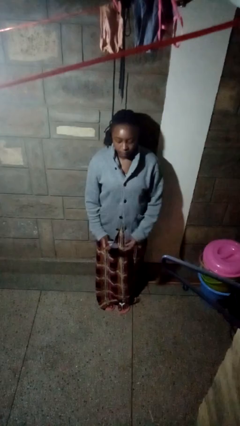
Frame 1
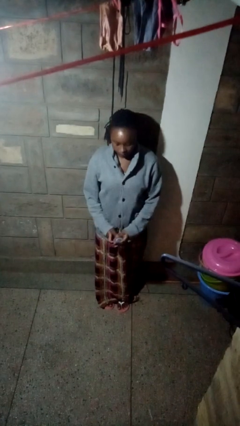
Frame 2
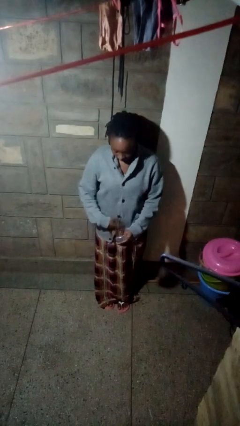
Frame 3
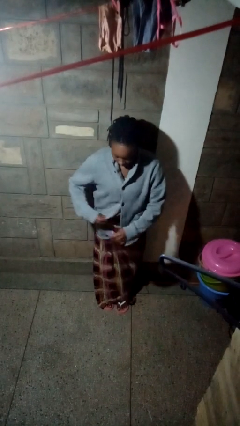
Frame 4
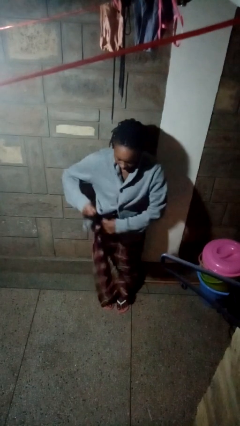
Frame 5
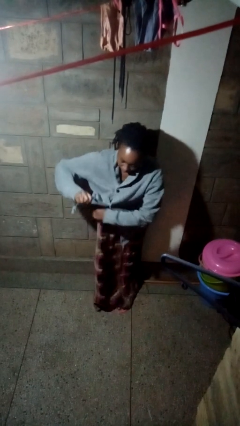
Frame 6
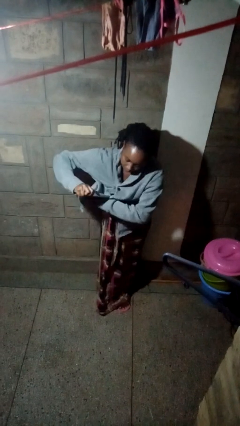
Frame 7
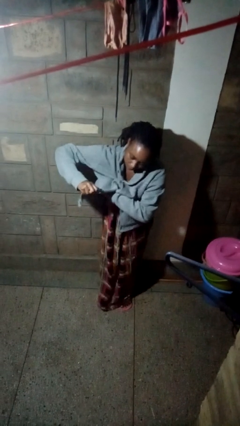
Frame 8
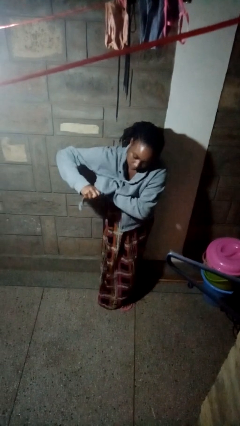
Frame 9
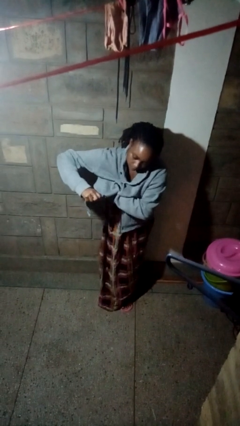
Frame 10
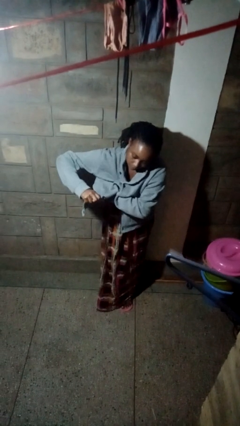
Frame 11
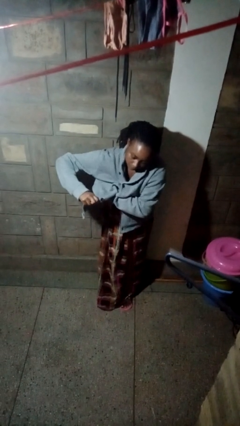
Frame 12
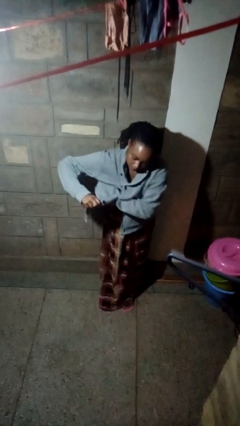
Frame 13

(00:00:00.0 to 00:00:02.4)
person applies deodorant

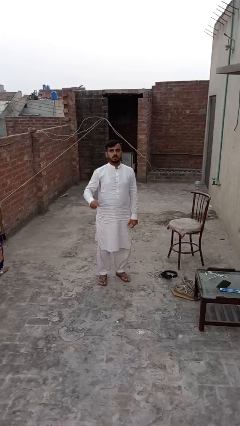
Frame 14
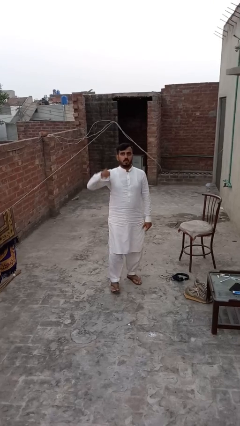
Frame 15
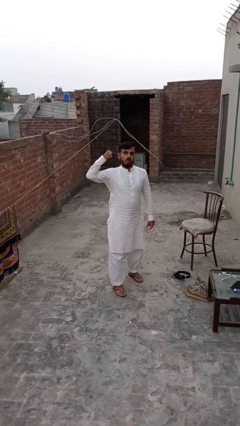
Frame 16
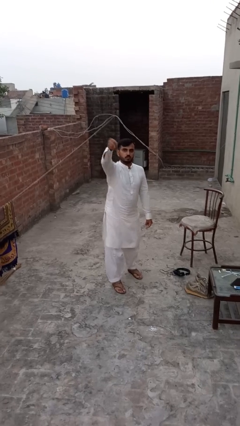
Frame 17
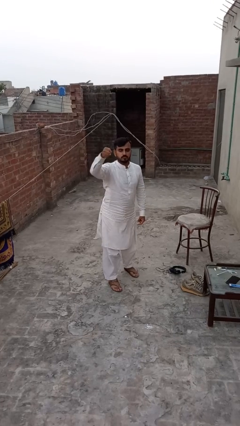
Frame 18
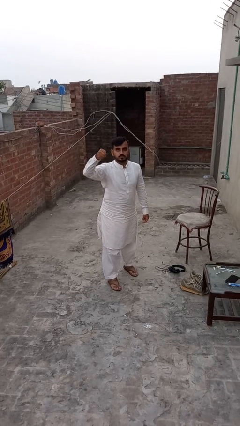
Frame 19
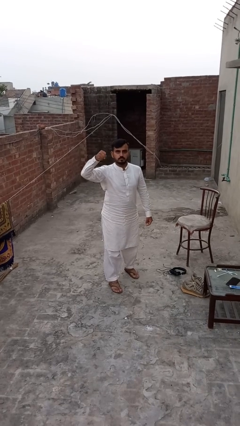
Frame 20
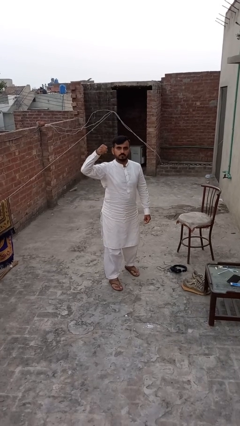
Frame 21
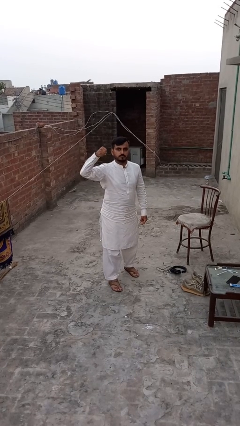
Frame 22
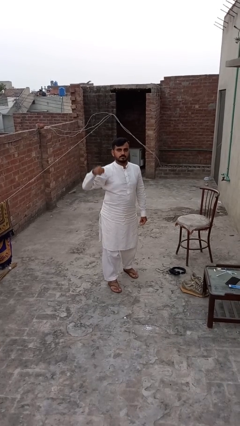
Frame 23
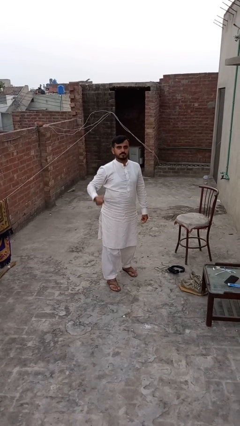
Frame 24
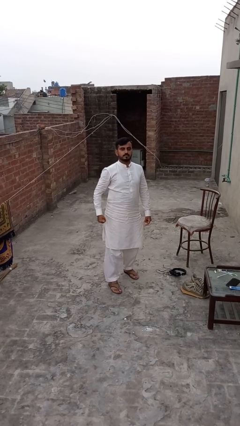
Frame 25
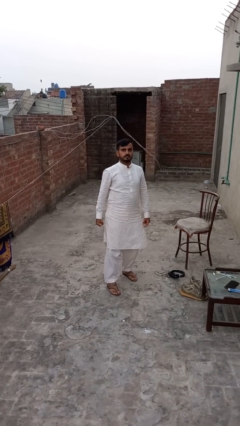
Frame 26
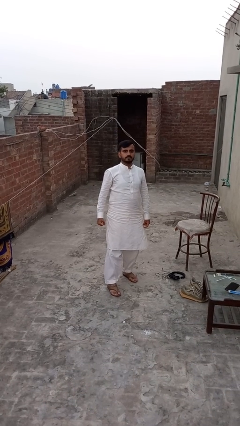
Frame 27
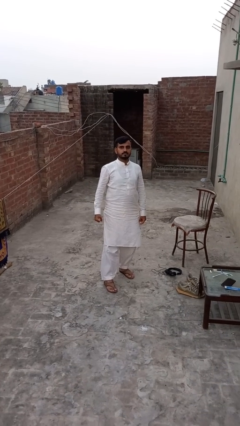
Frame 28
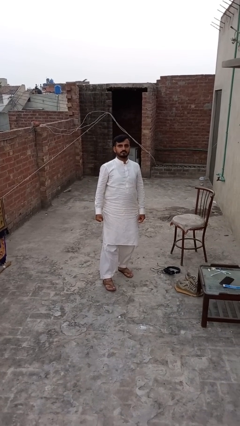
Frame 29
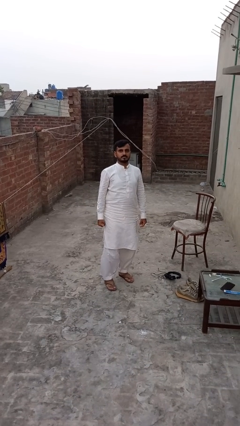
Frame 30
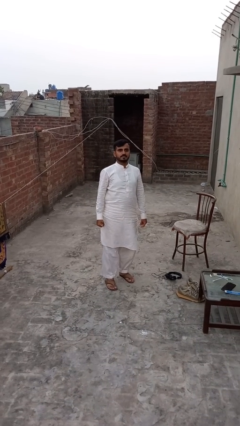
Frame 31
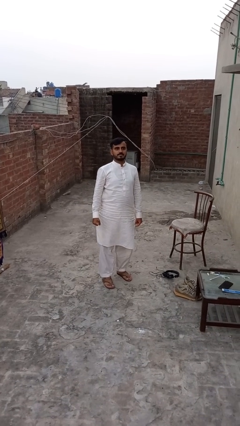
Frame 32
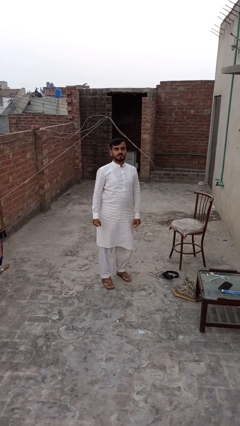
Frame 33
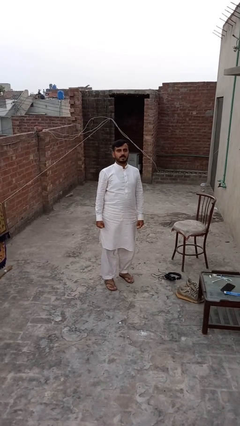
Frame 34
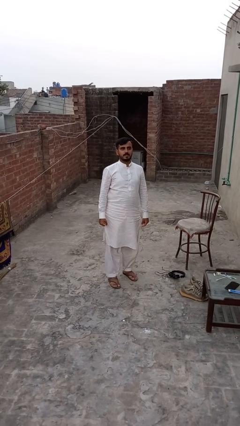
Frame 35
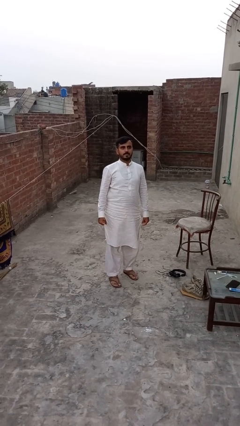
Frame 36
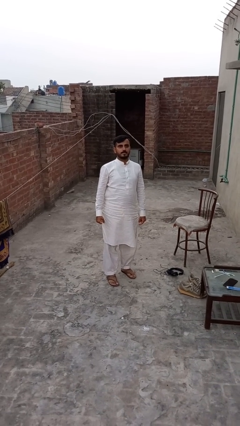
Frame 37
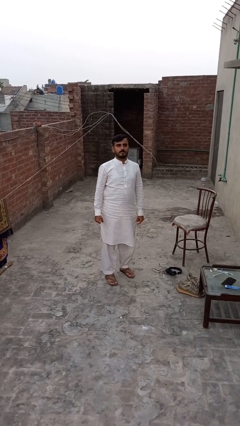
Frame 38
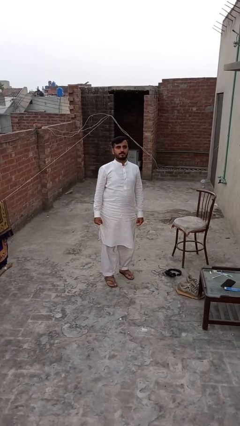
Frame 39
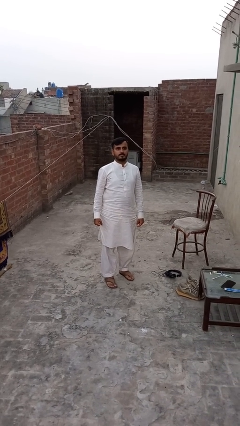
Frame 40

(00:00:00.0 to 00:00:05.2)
person punches

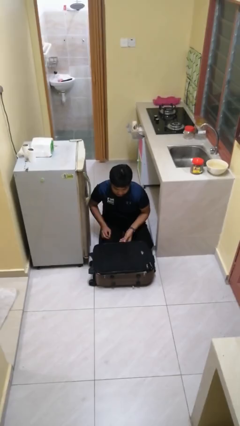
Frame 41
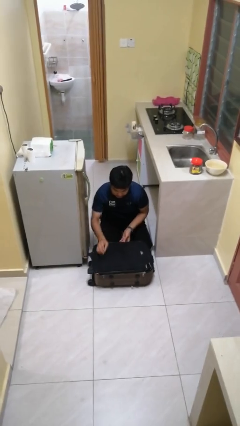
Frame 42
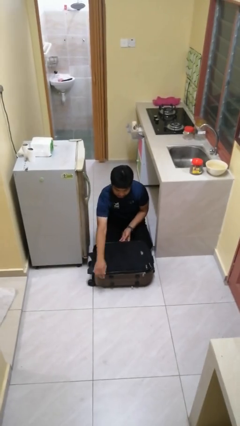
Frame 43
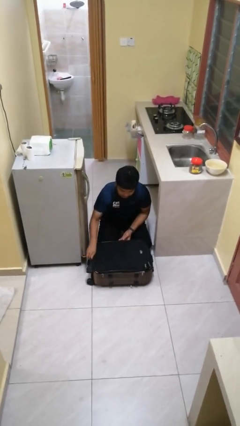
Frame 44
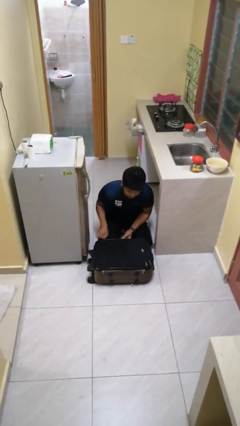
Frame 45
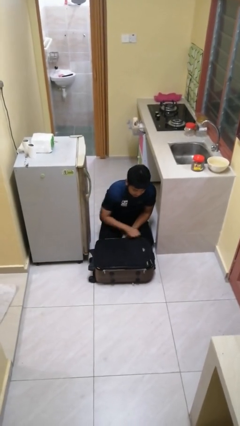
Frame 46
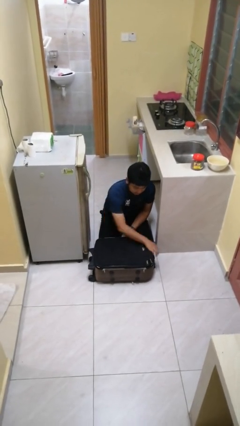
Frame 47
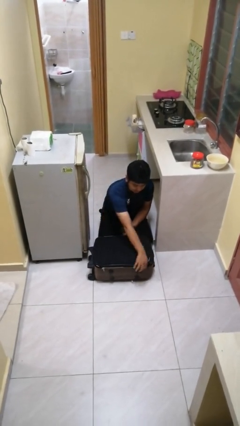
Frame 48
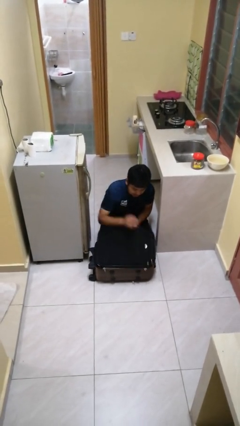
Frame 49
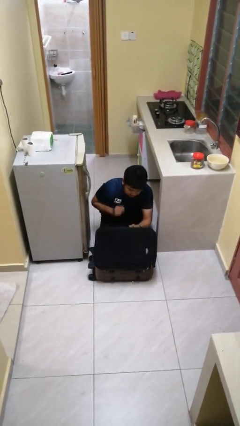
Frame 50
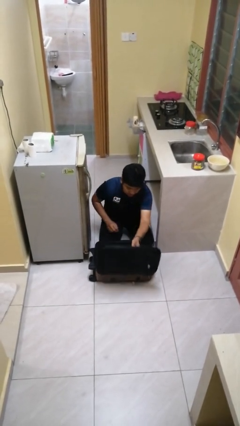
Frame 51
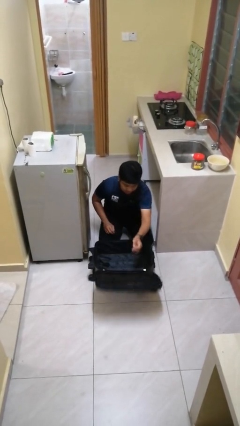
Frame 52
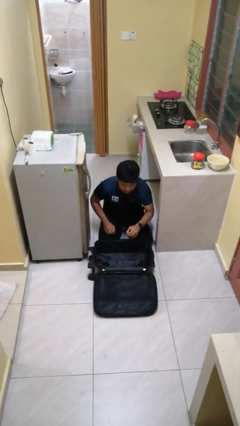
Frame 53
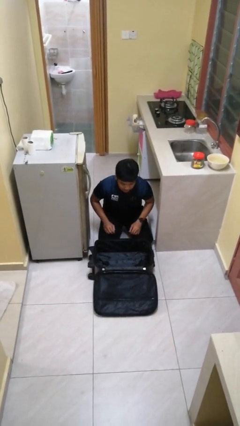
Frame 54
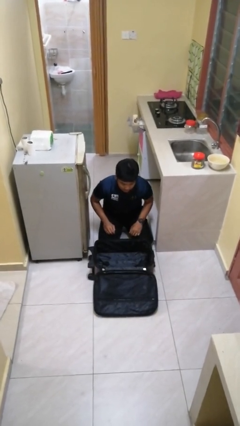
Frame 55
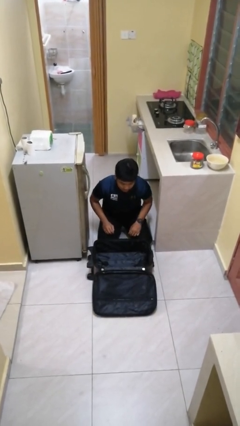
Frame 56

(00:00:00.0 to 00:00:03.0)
person opens suitcase

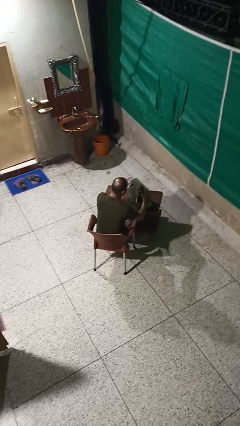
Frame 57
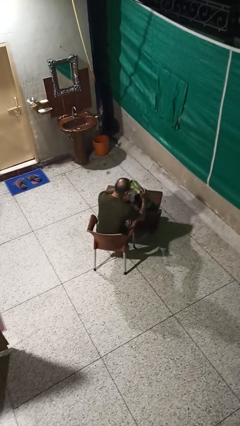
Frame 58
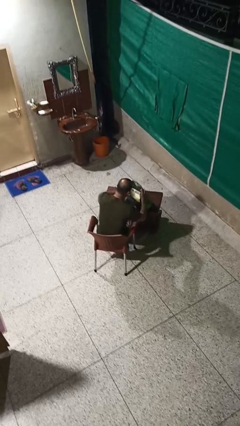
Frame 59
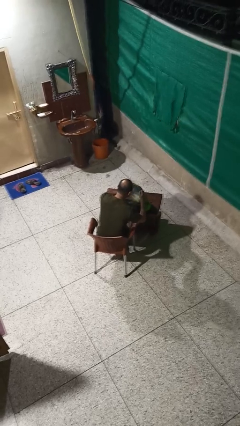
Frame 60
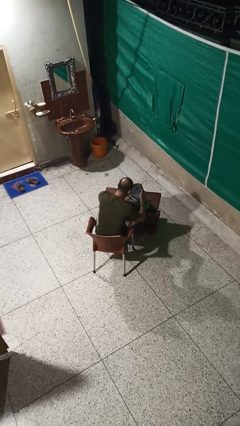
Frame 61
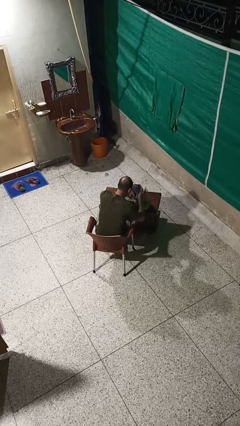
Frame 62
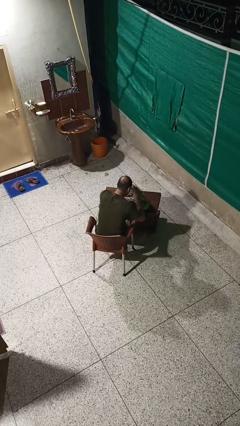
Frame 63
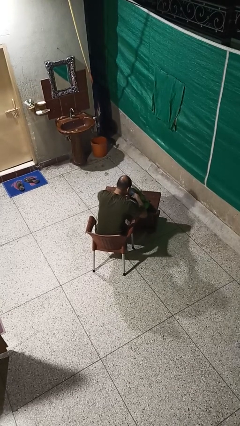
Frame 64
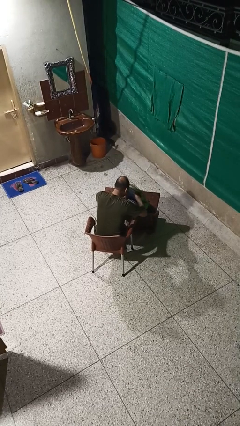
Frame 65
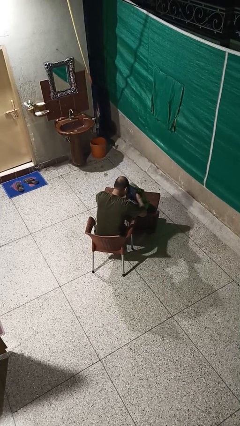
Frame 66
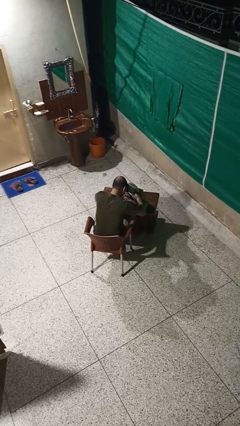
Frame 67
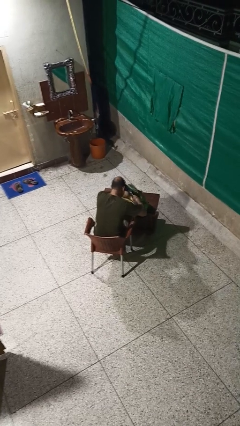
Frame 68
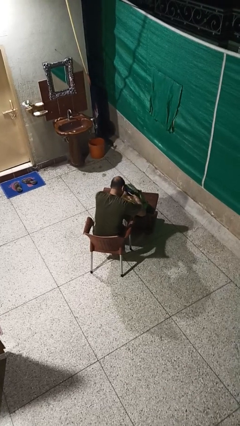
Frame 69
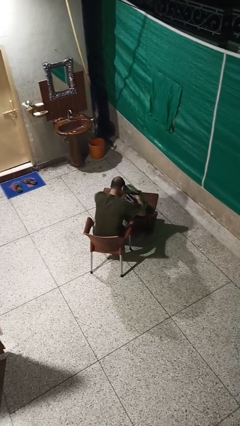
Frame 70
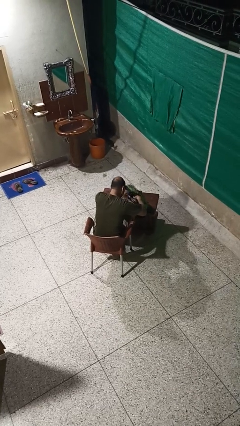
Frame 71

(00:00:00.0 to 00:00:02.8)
person searches in backpack

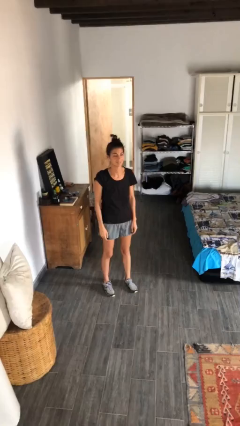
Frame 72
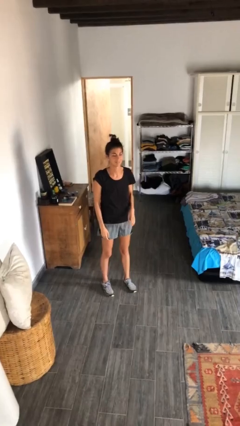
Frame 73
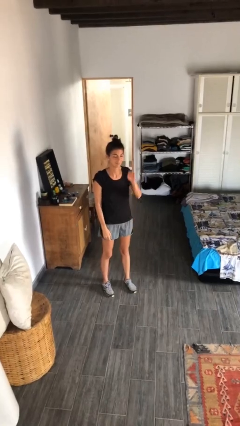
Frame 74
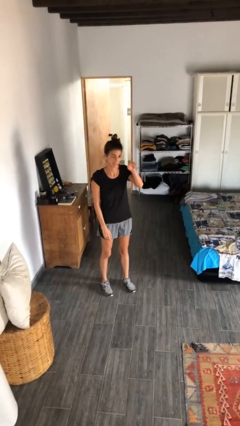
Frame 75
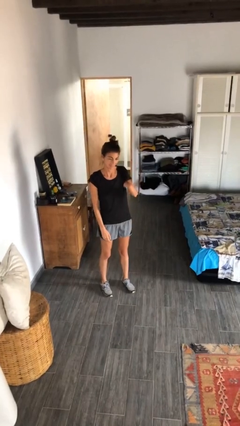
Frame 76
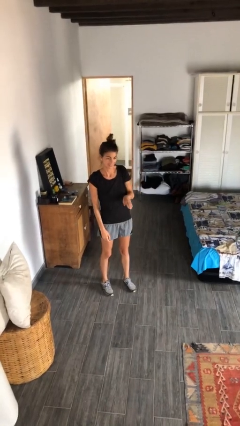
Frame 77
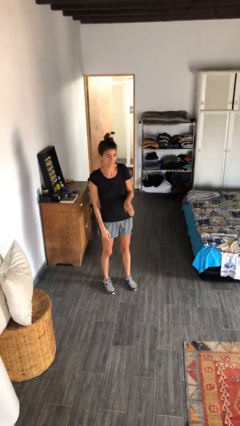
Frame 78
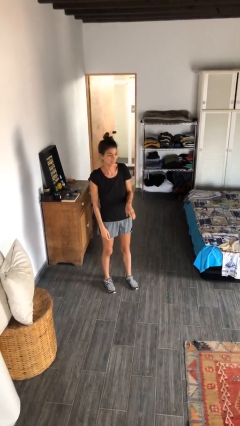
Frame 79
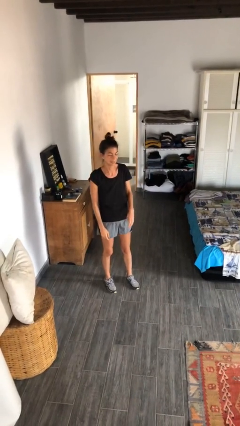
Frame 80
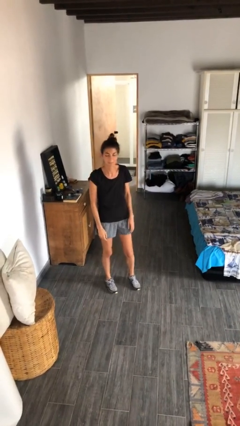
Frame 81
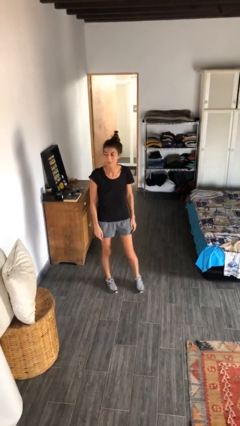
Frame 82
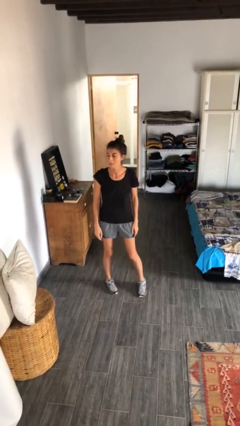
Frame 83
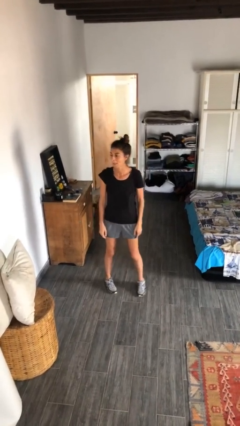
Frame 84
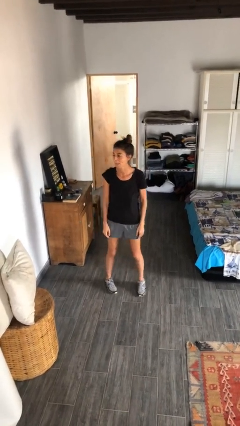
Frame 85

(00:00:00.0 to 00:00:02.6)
person gestures swipe down

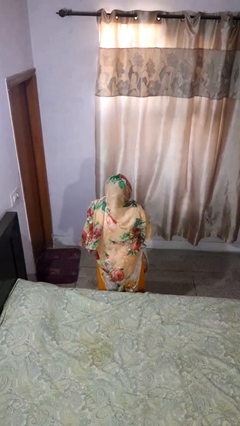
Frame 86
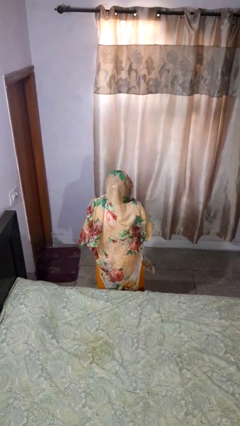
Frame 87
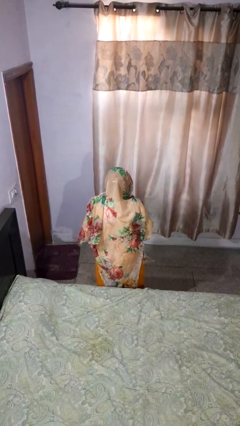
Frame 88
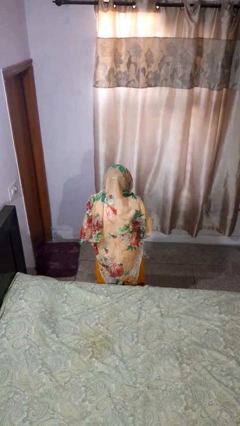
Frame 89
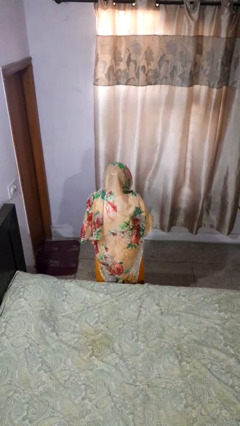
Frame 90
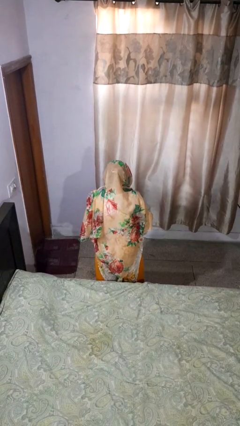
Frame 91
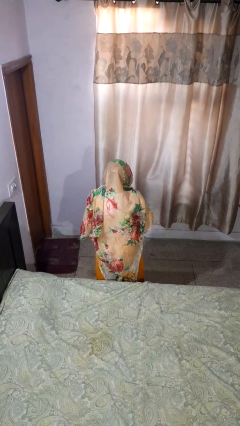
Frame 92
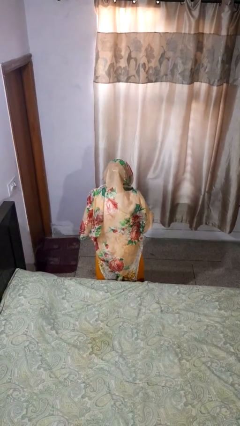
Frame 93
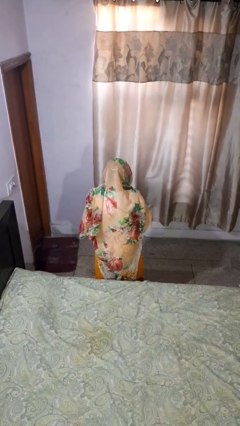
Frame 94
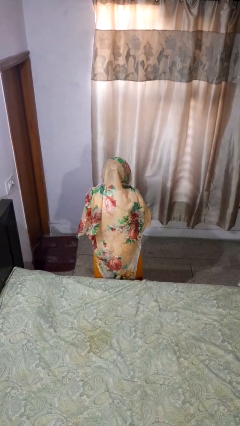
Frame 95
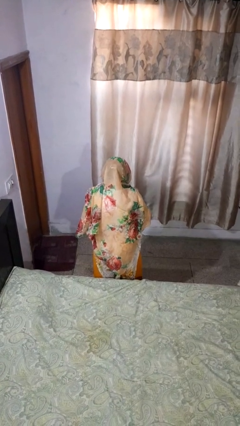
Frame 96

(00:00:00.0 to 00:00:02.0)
person catches dropped object
